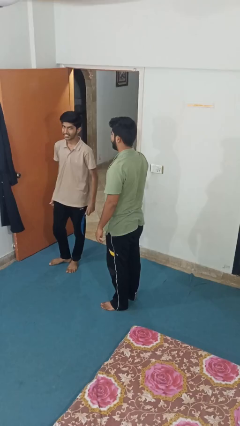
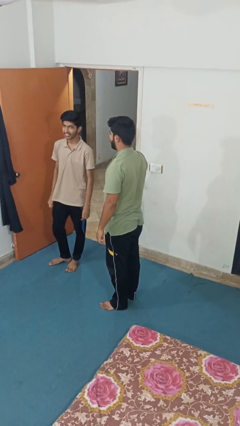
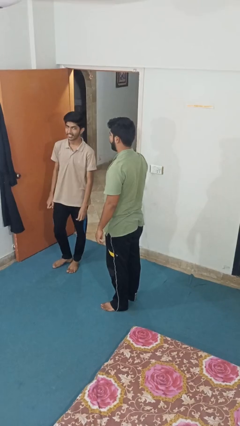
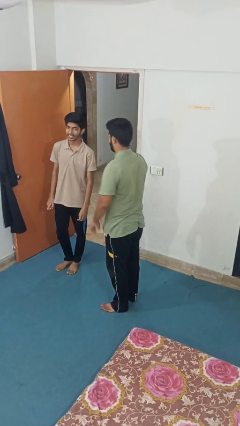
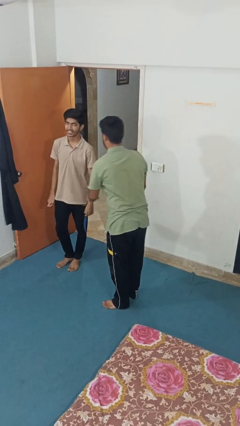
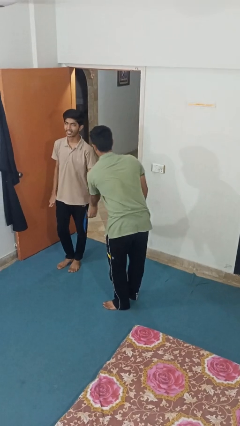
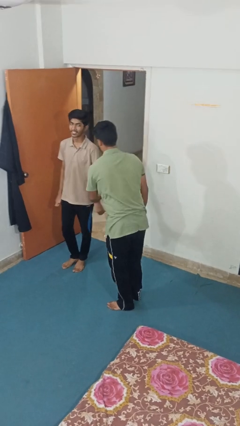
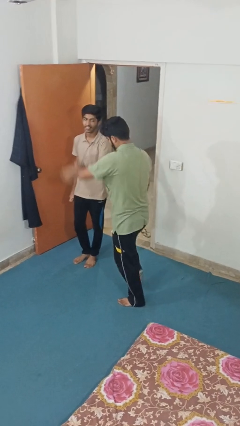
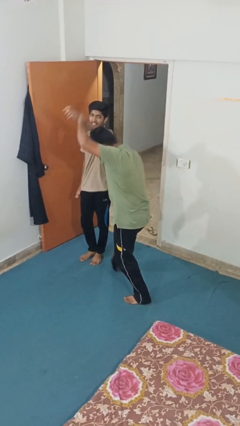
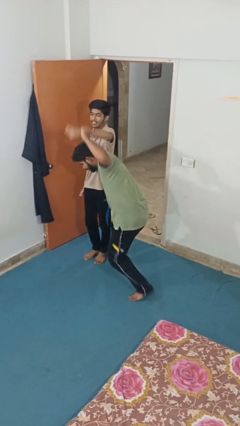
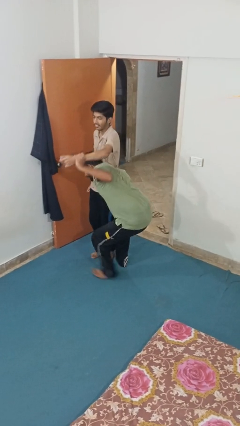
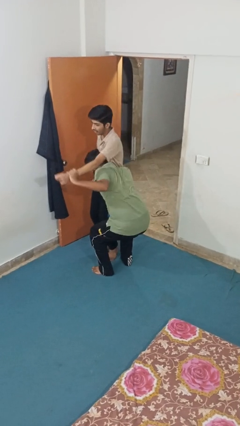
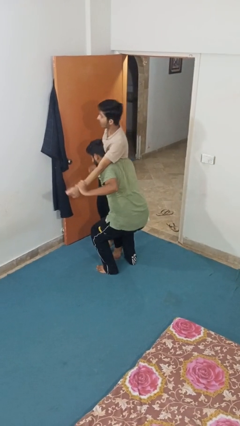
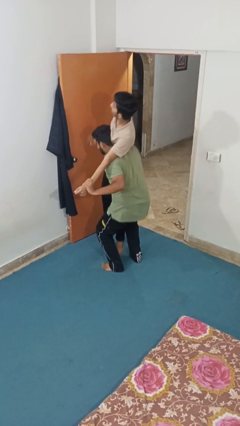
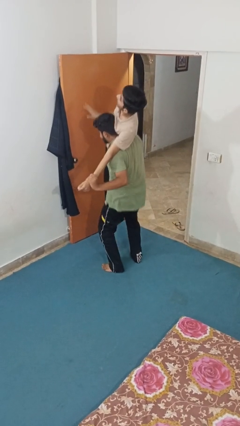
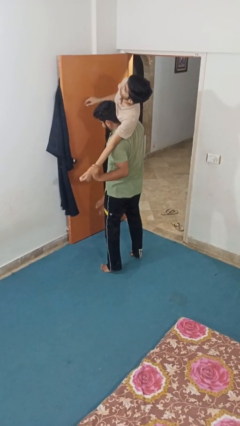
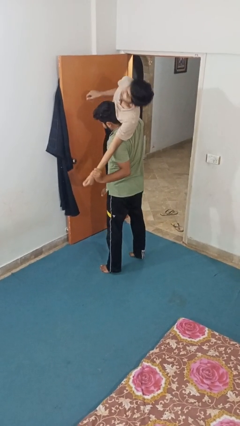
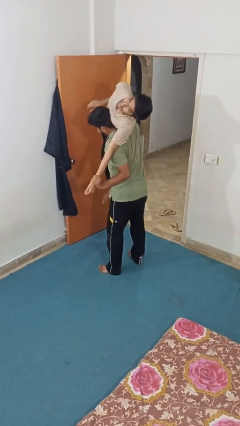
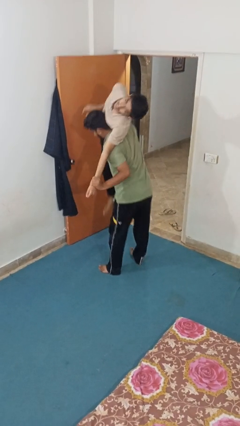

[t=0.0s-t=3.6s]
person carries person over shoulder

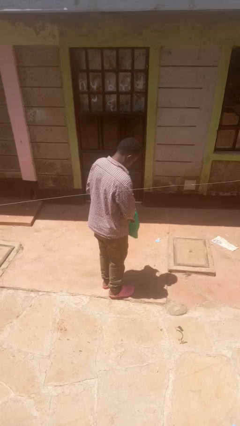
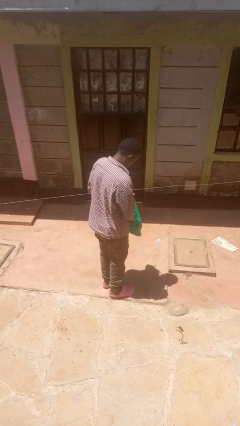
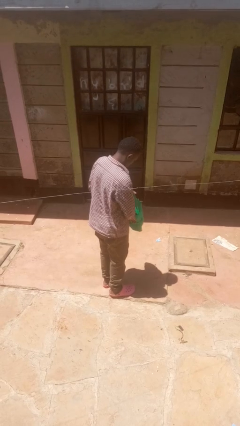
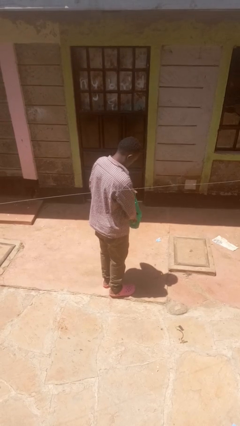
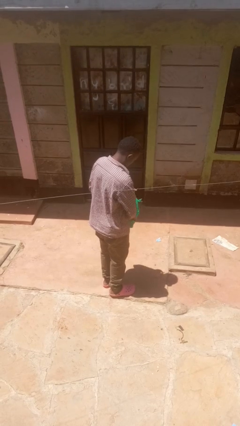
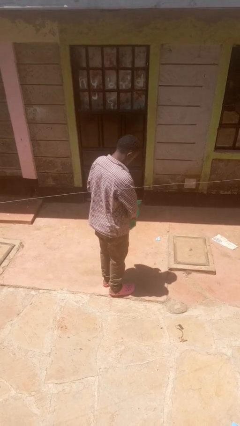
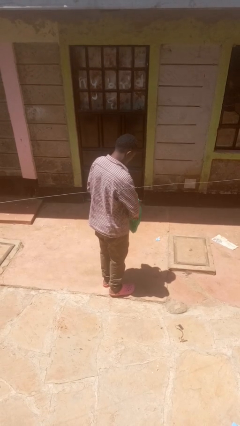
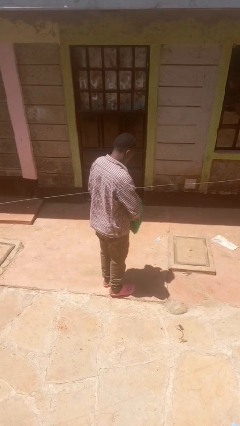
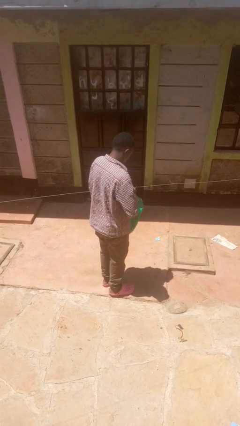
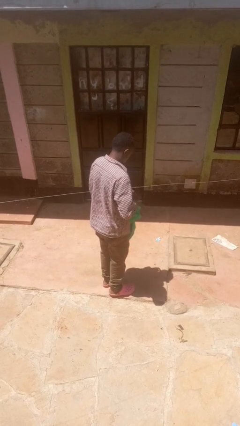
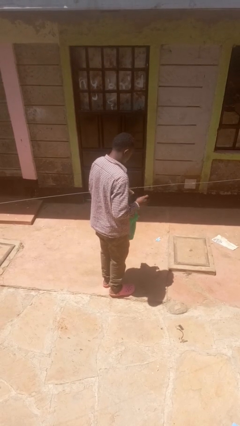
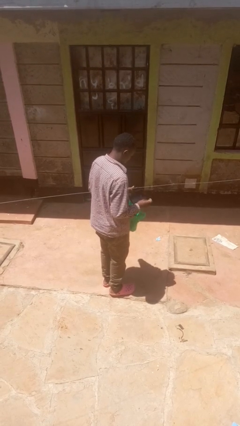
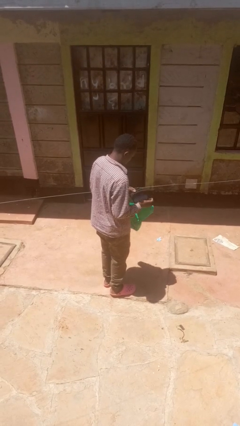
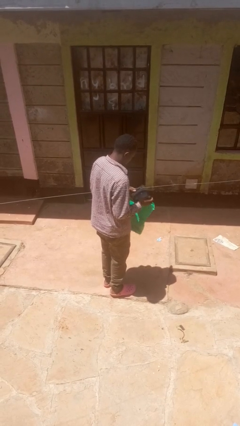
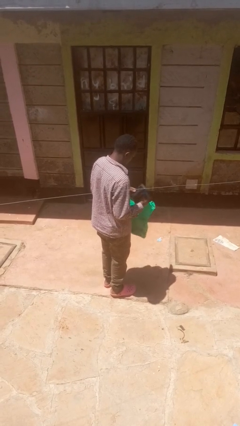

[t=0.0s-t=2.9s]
person takes object from bag

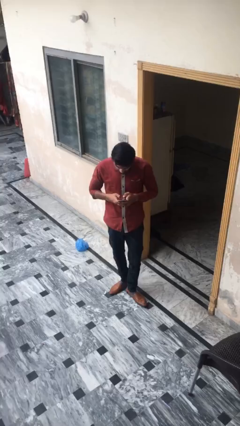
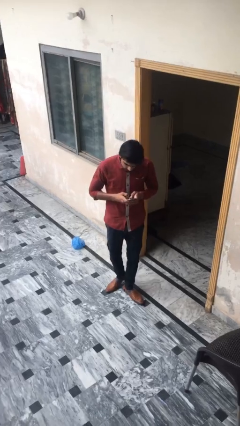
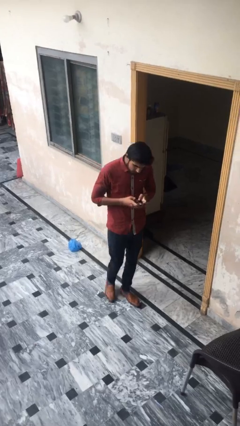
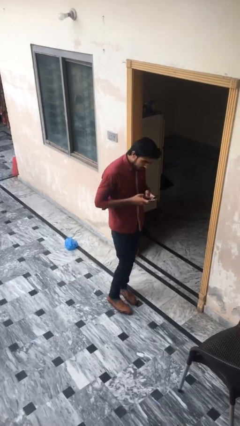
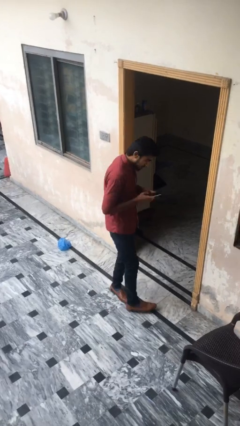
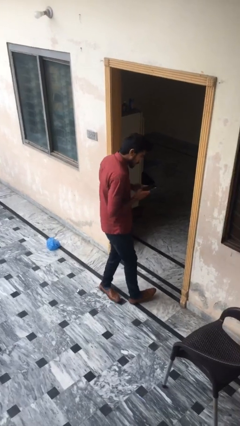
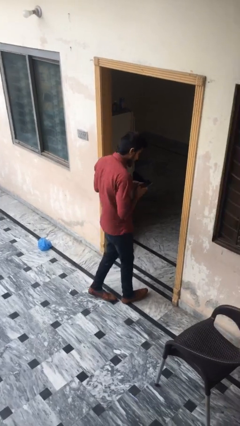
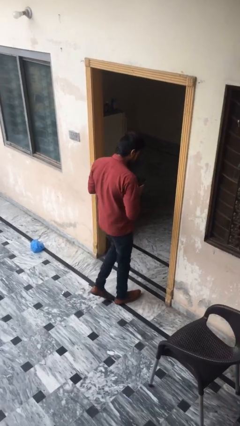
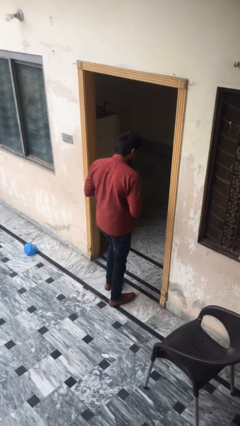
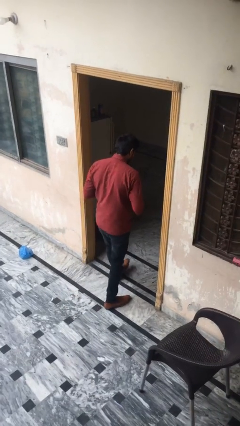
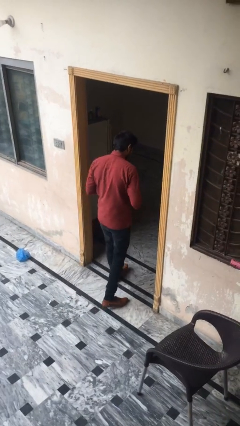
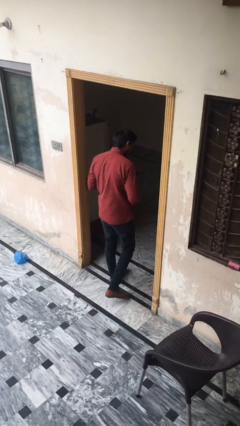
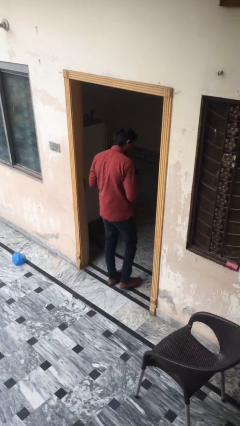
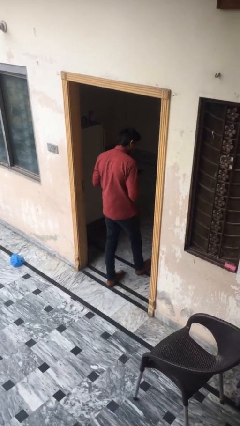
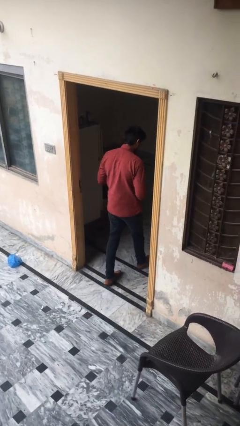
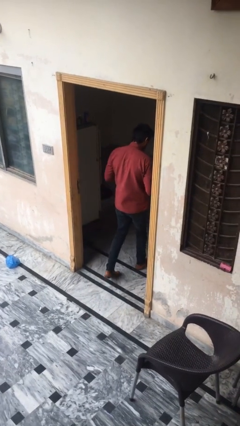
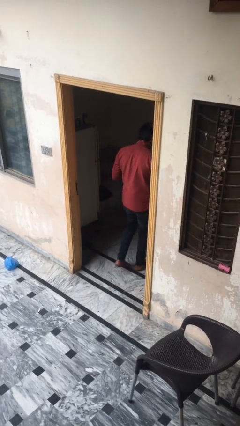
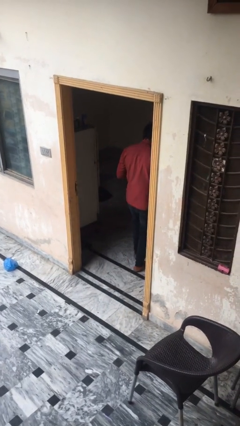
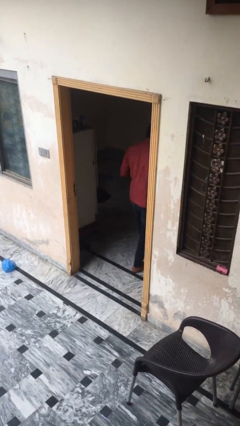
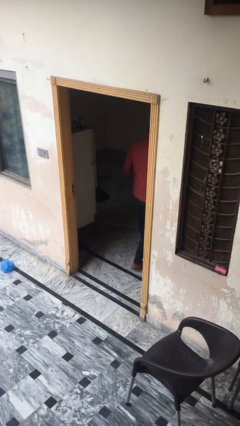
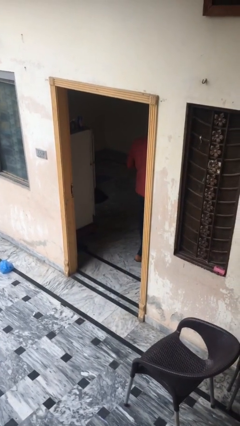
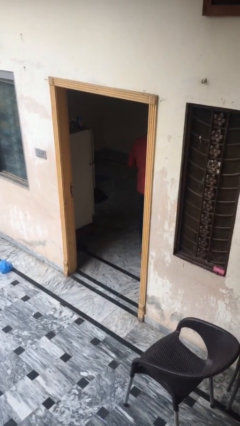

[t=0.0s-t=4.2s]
person exits scene through structure

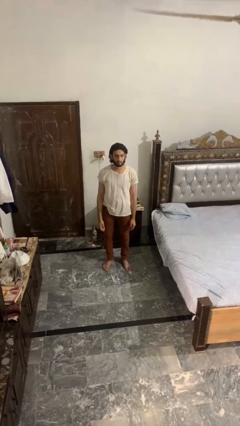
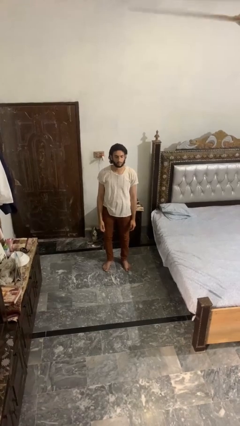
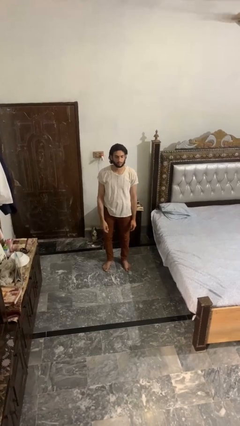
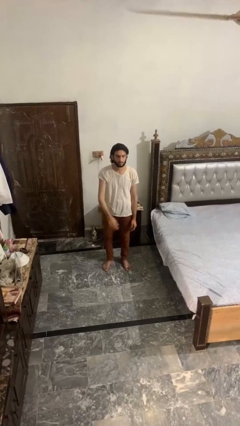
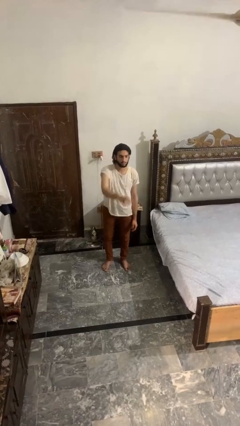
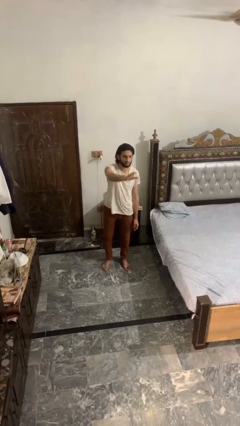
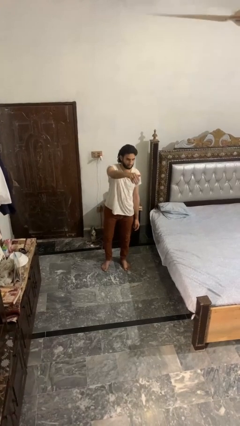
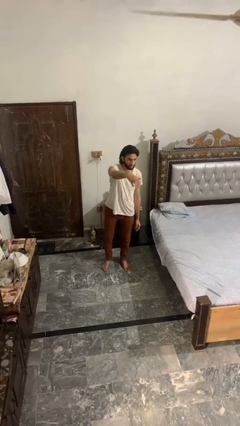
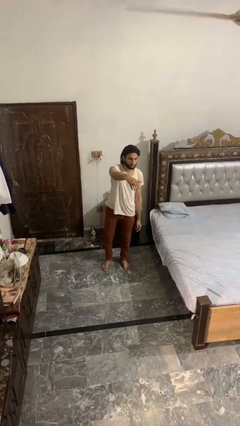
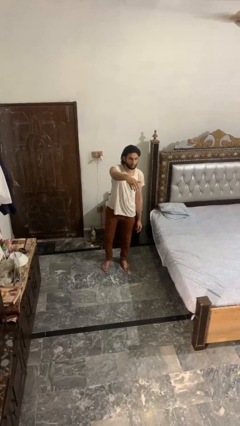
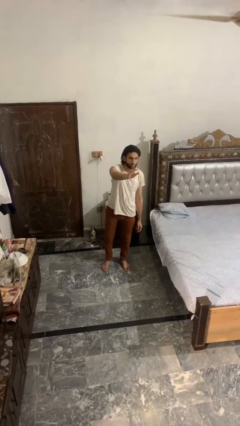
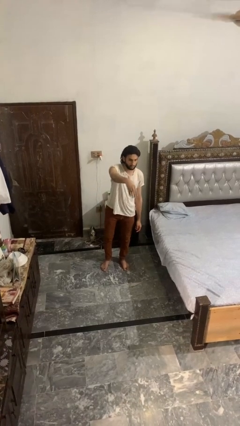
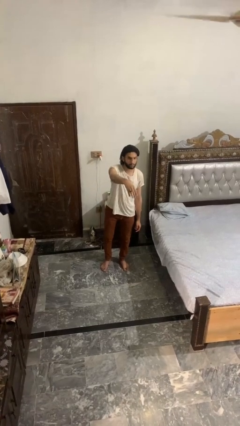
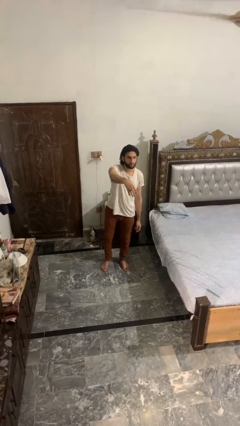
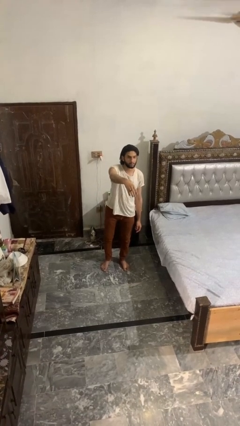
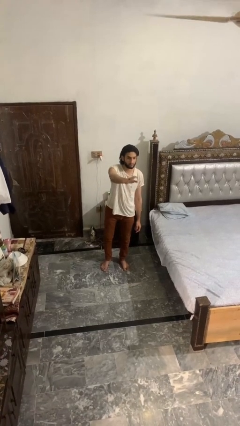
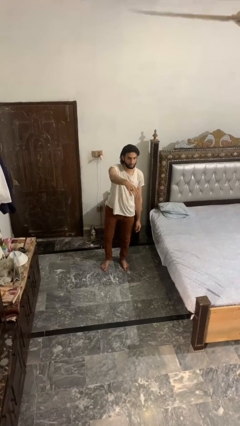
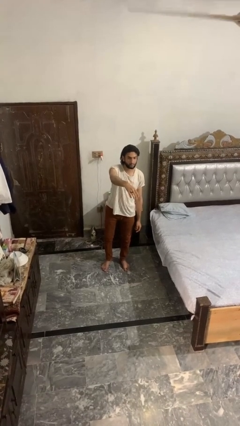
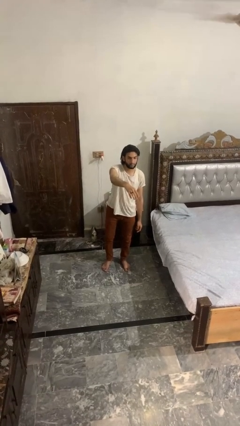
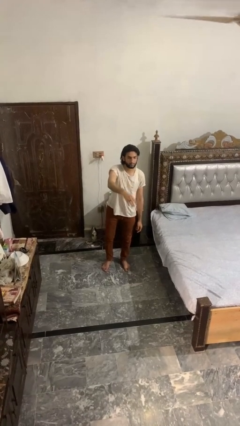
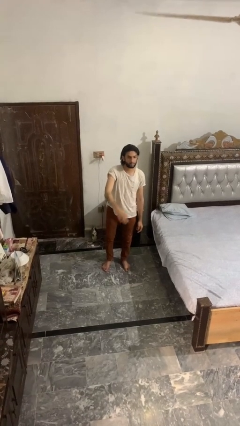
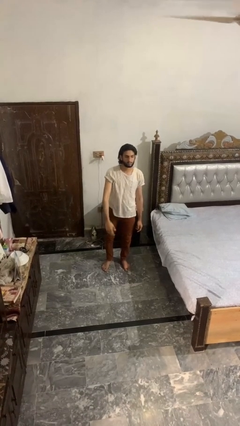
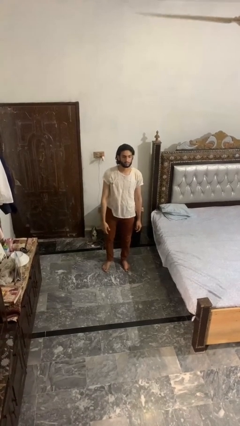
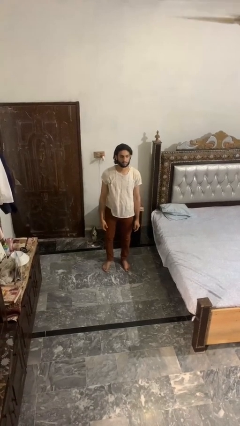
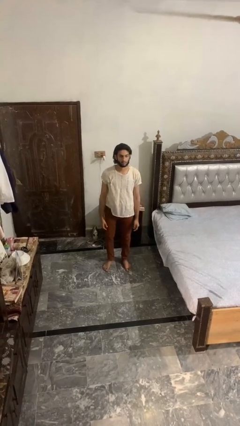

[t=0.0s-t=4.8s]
person gestures come here

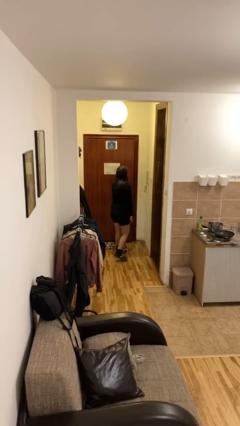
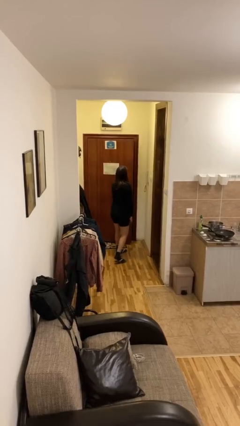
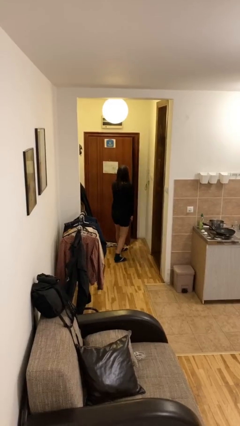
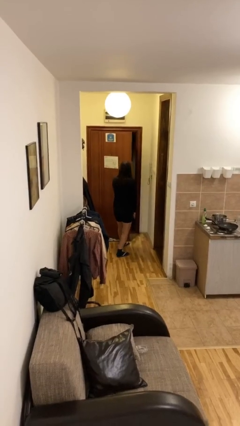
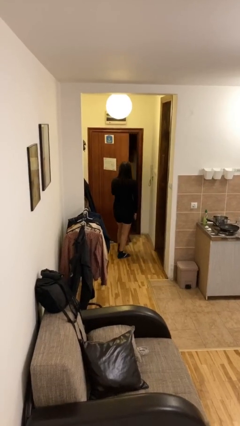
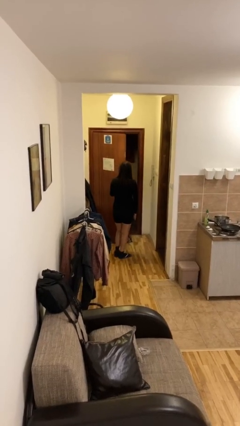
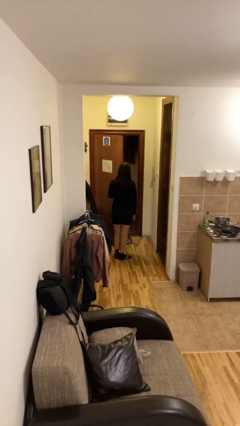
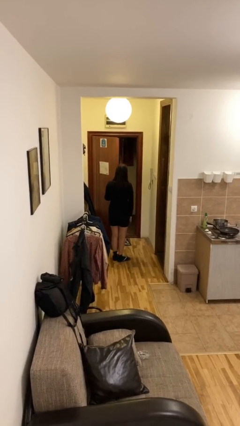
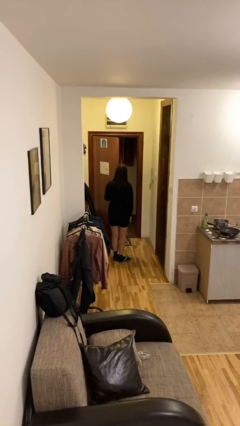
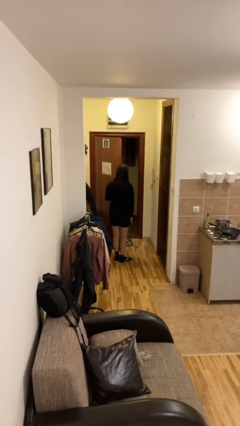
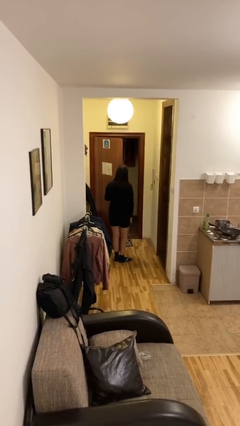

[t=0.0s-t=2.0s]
person opens facility door
